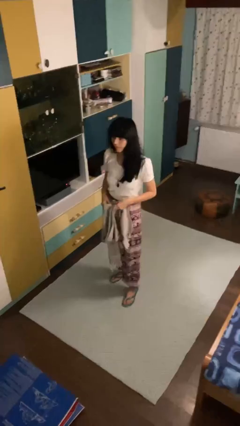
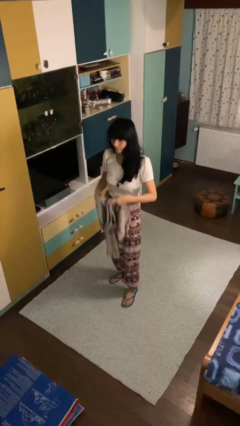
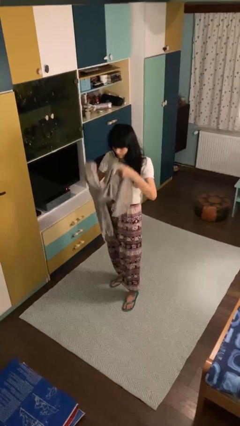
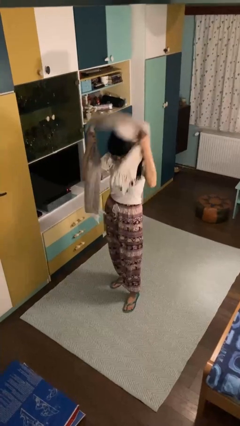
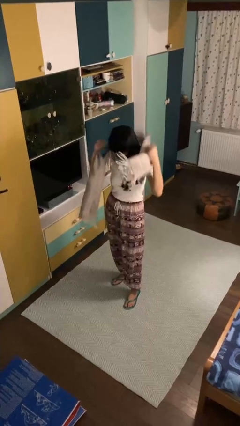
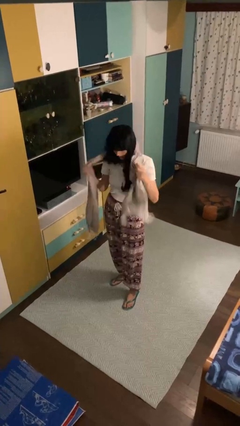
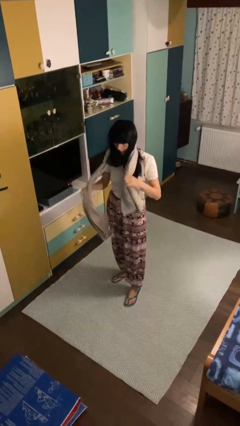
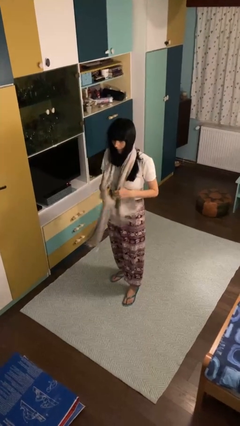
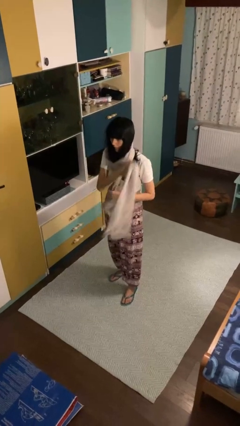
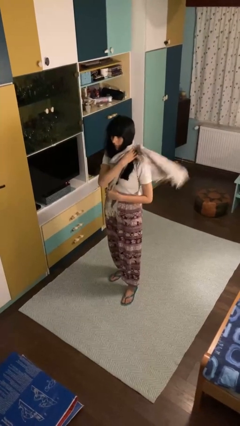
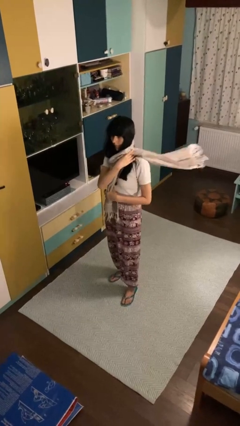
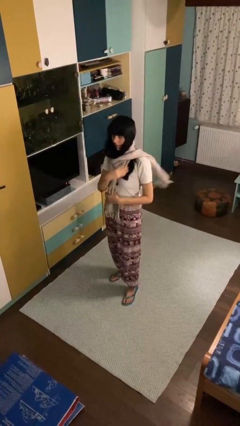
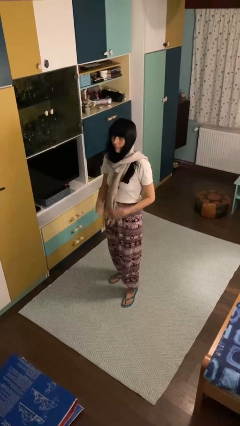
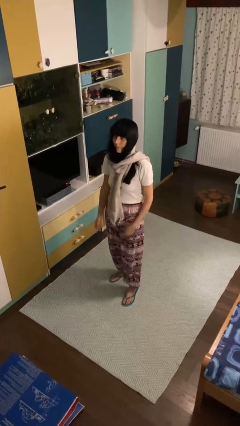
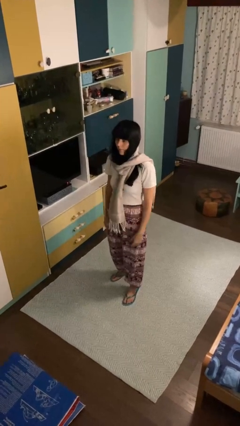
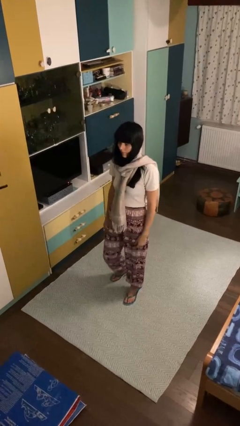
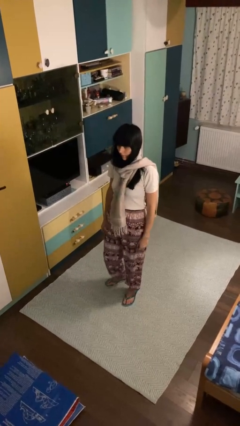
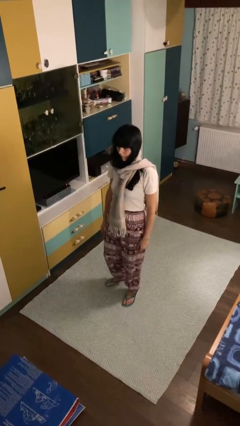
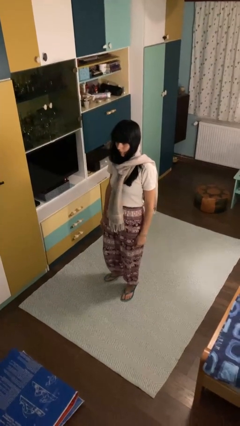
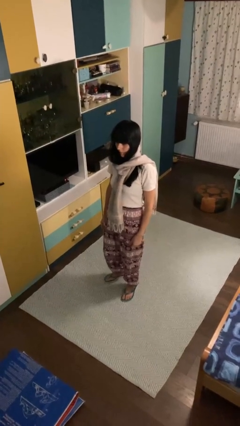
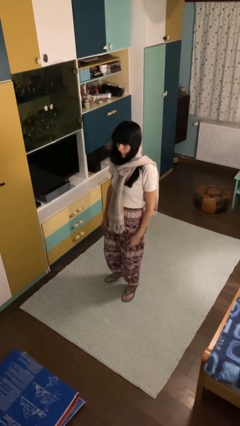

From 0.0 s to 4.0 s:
person puts on scarf

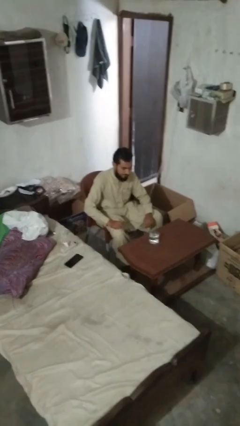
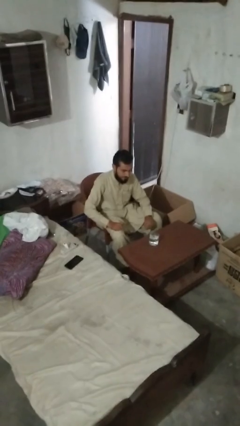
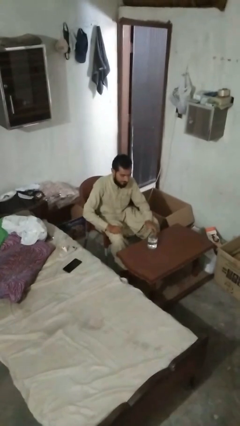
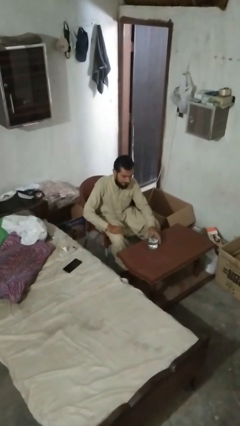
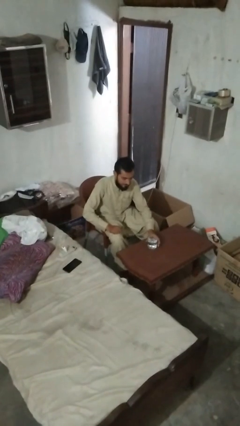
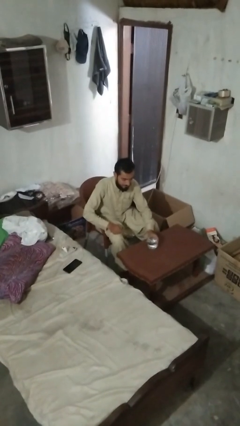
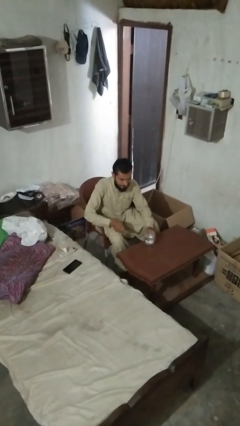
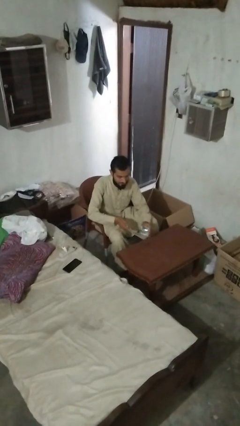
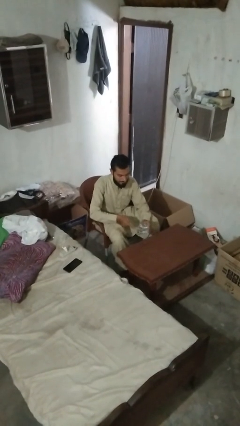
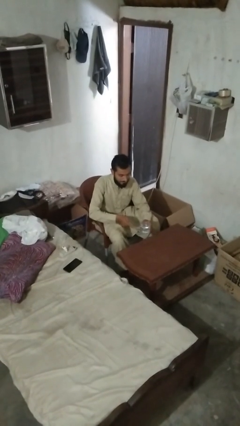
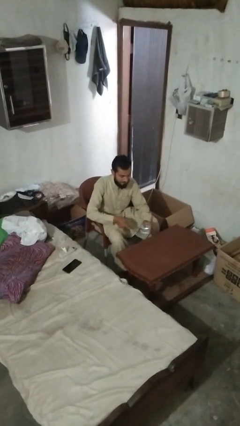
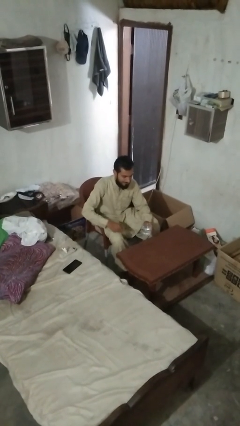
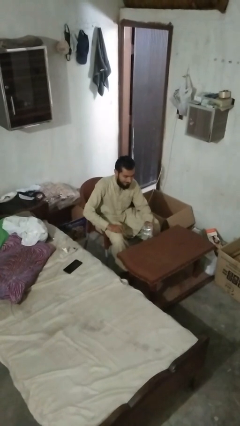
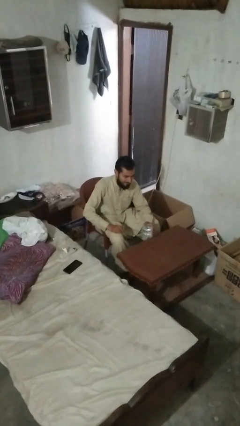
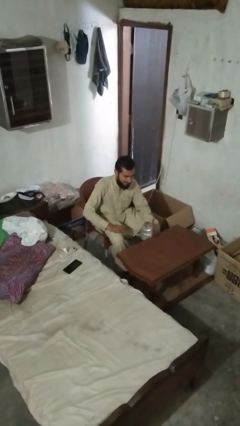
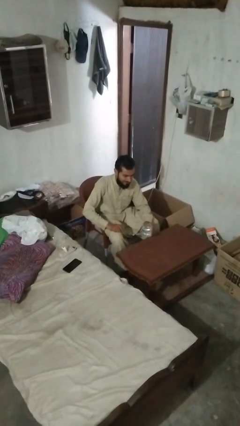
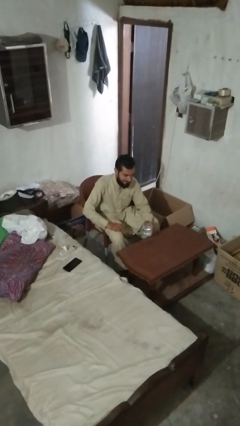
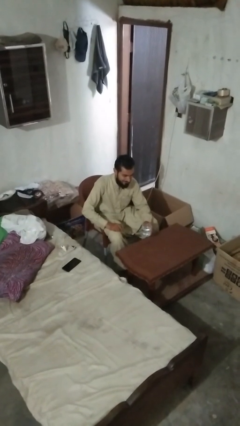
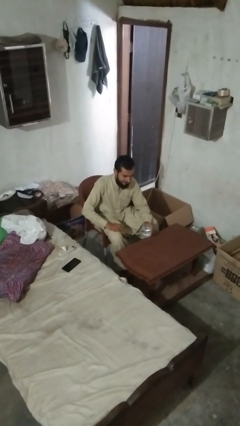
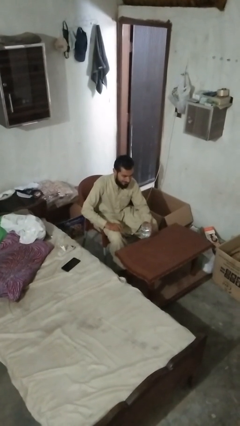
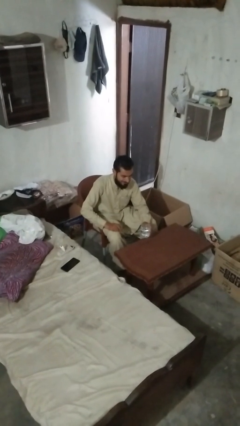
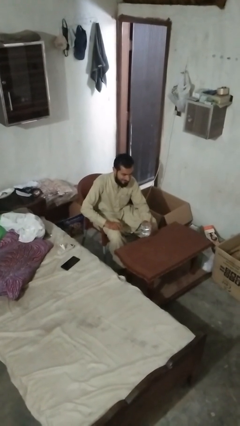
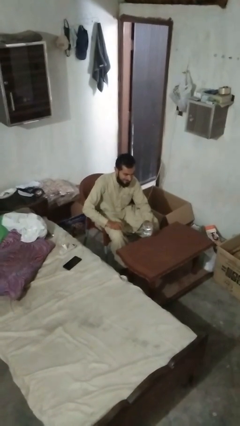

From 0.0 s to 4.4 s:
person knocks over glass

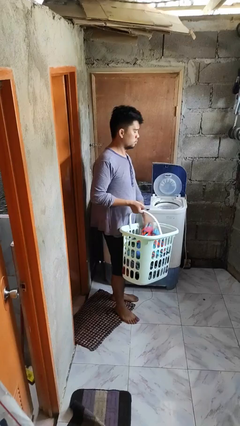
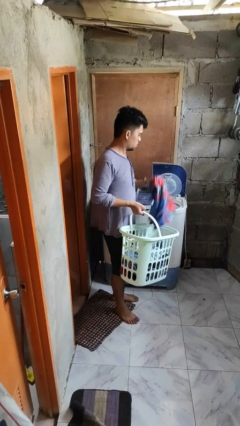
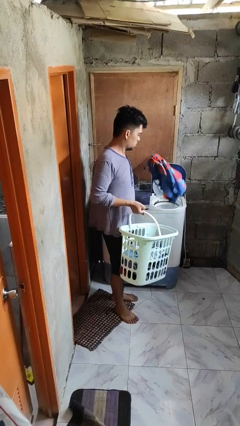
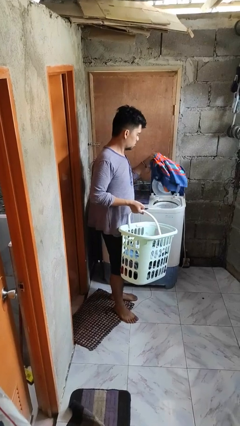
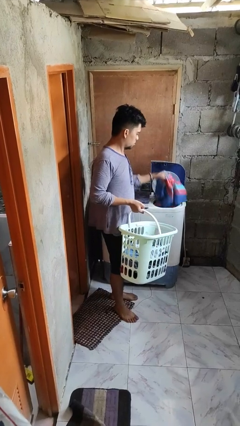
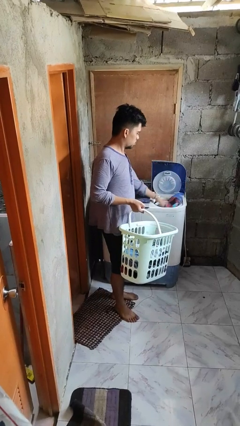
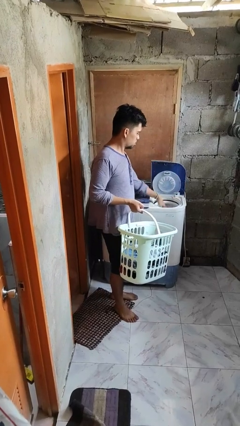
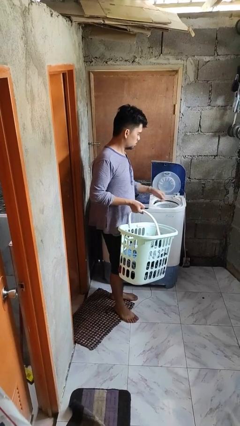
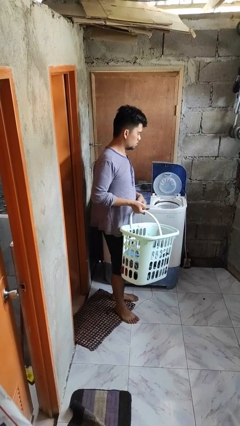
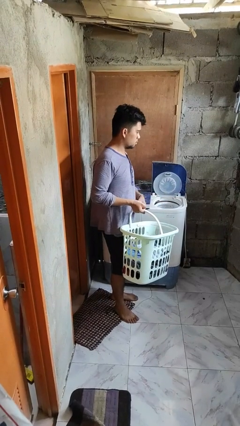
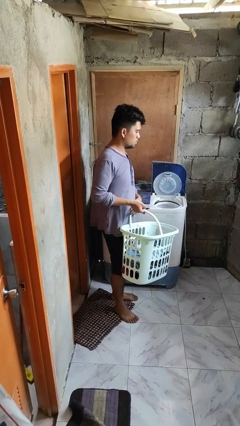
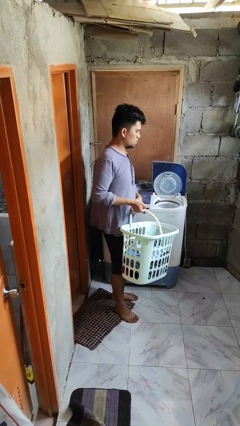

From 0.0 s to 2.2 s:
person loads dryer

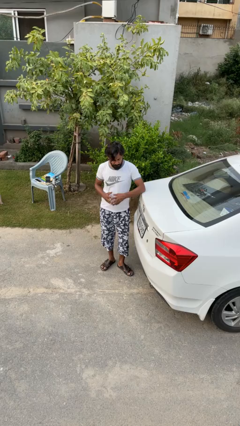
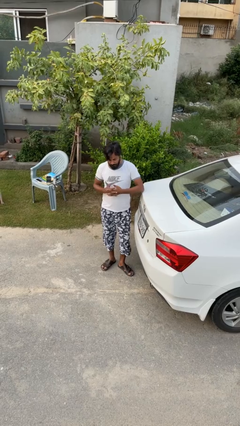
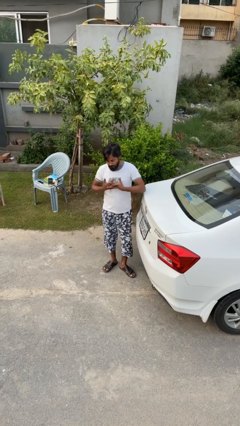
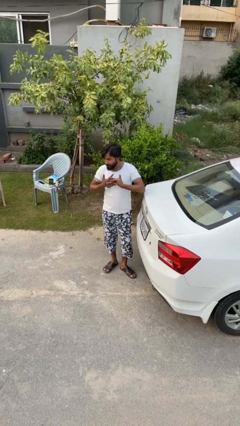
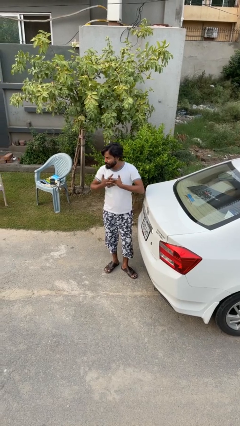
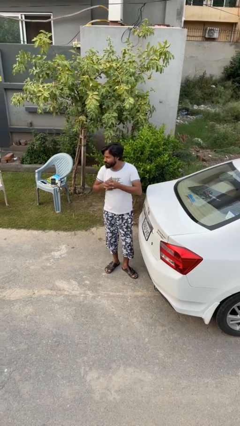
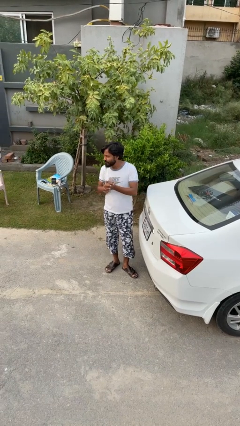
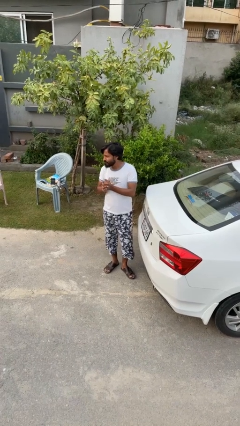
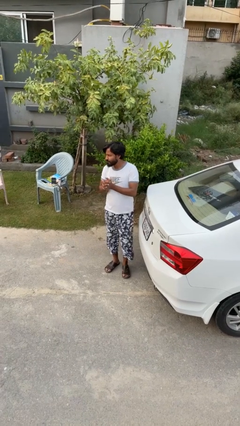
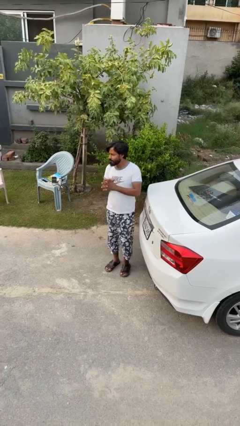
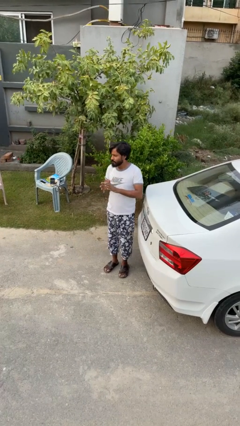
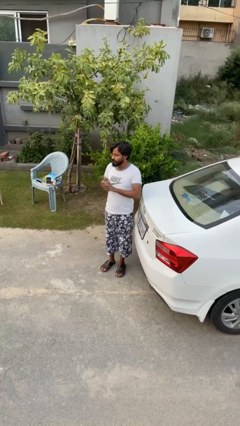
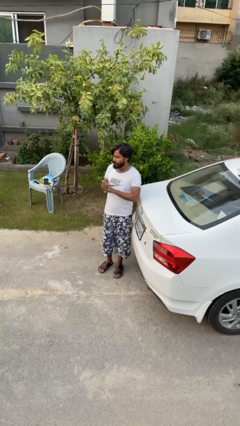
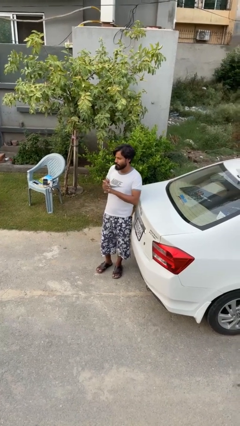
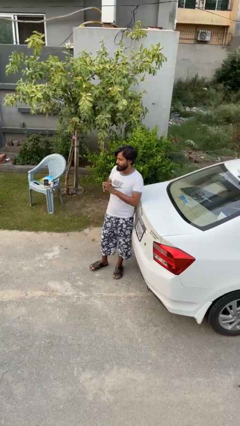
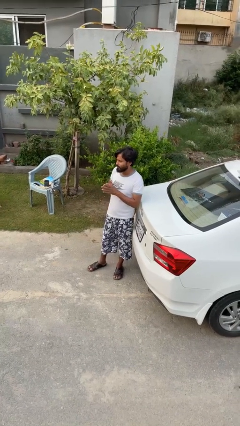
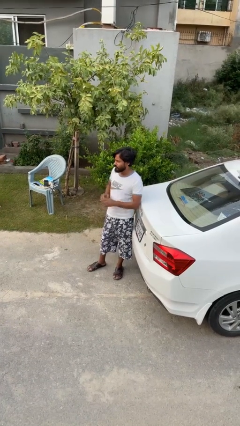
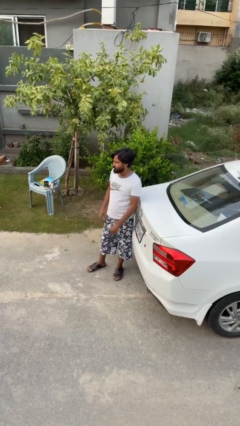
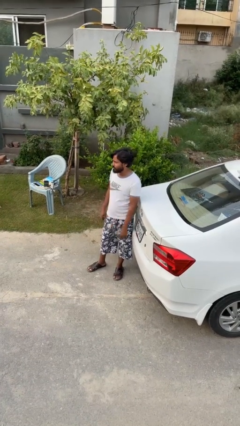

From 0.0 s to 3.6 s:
person cracks knuckles

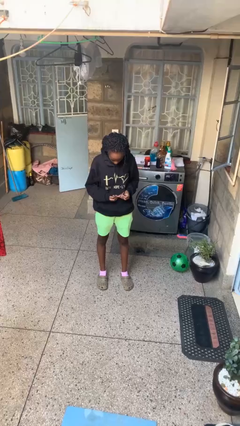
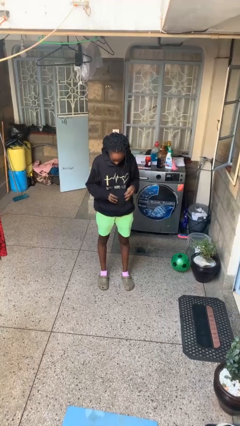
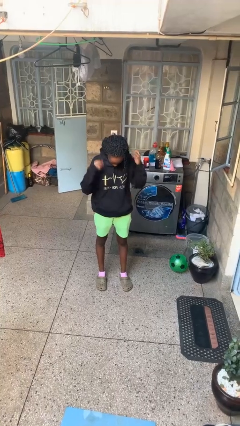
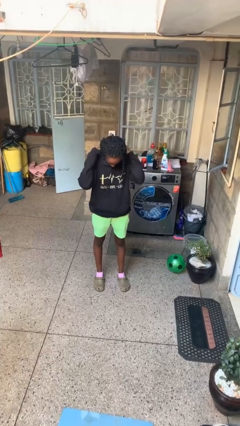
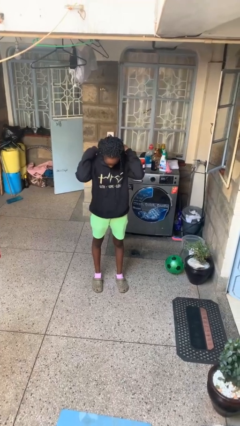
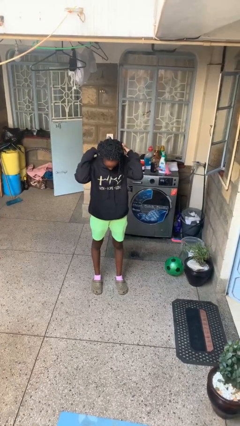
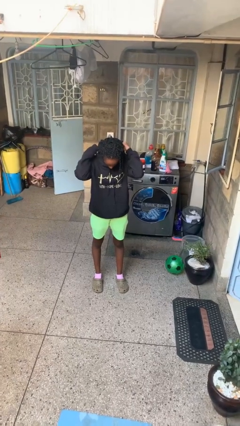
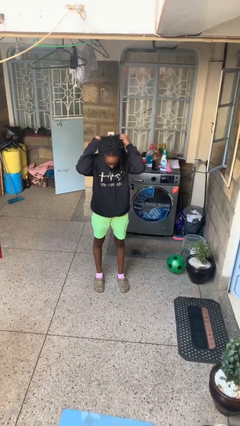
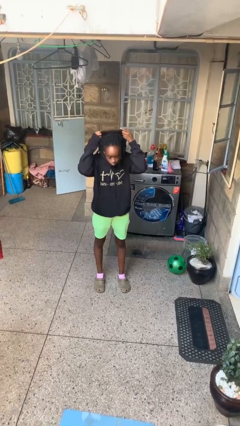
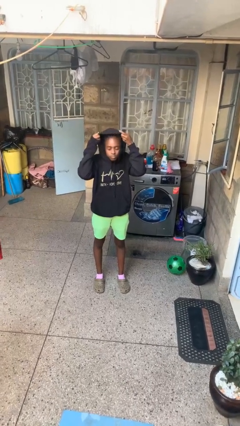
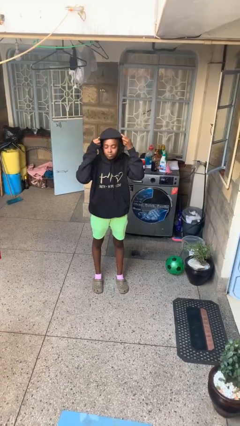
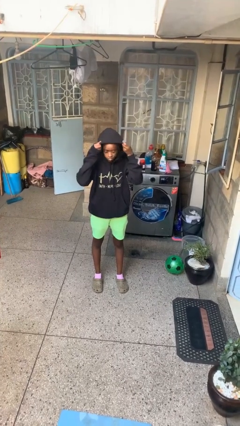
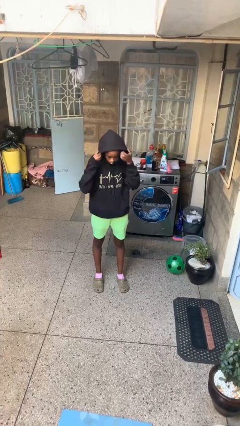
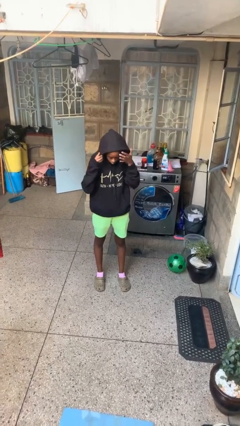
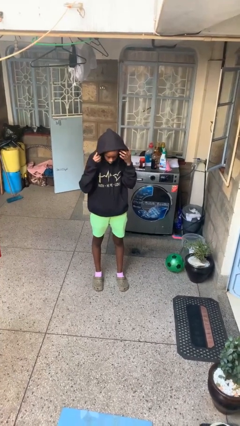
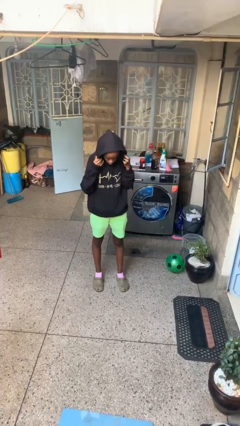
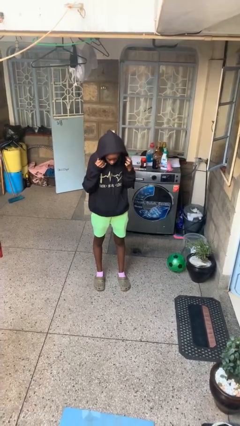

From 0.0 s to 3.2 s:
person puts on hoodie
